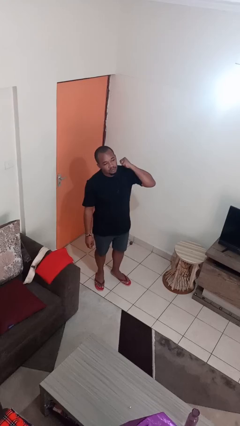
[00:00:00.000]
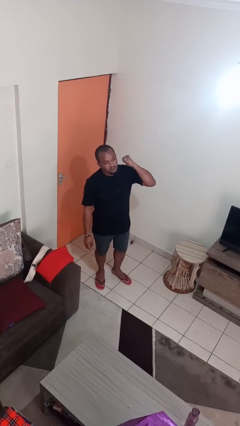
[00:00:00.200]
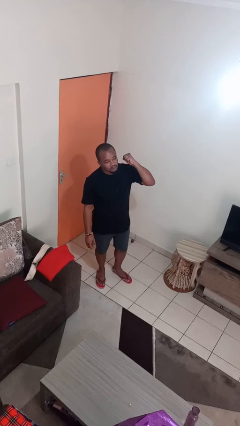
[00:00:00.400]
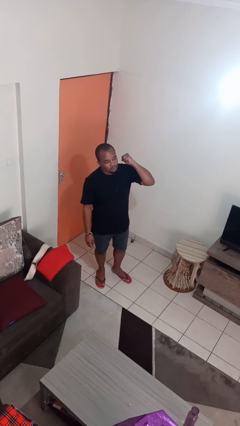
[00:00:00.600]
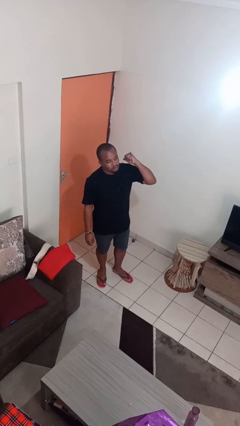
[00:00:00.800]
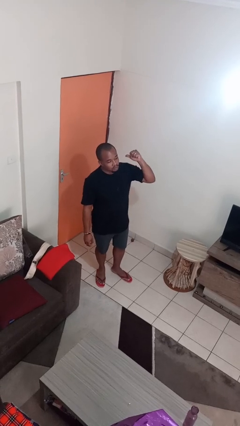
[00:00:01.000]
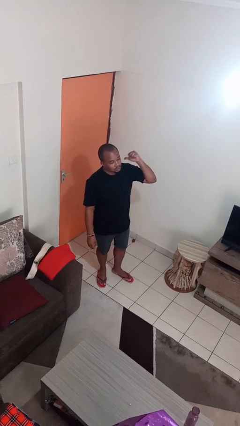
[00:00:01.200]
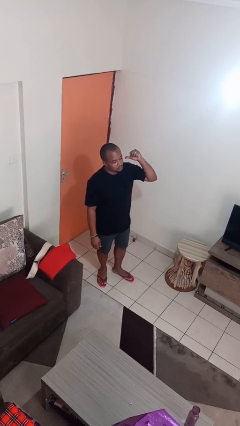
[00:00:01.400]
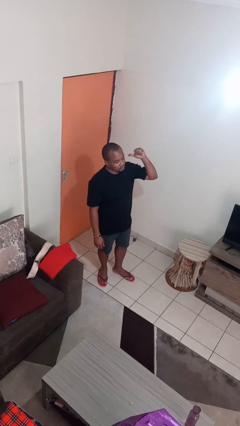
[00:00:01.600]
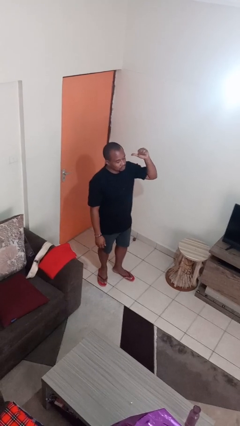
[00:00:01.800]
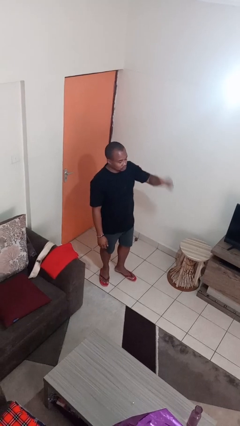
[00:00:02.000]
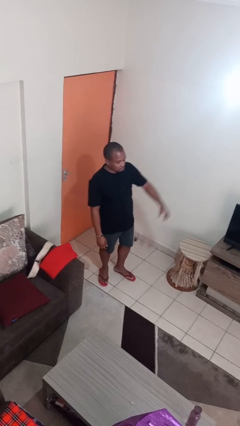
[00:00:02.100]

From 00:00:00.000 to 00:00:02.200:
person gestures behind me

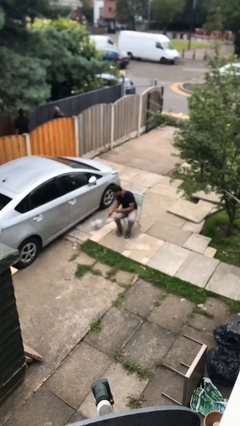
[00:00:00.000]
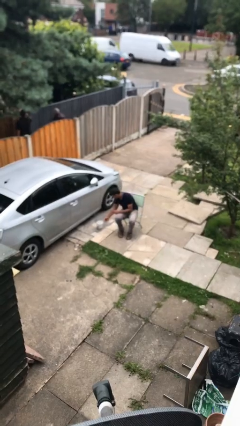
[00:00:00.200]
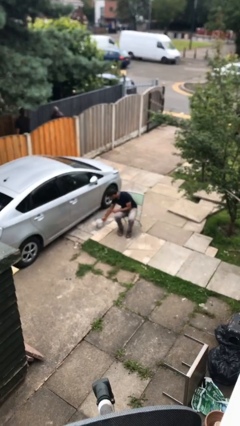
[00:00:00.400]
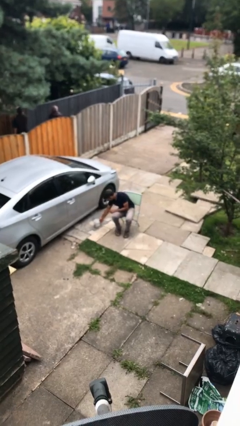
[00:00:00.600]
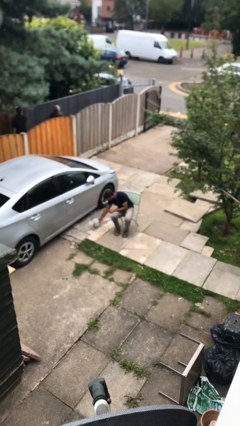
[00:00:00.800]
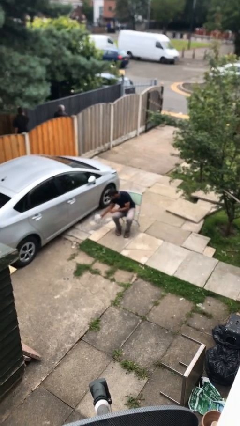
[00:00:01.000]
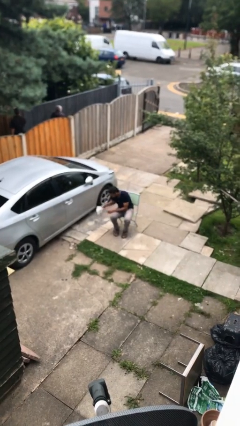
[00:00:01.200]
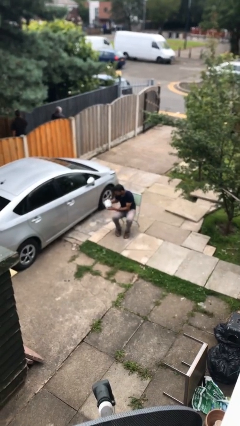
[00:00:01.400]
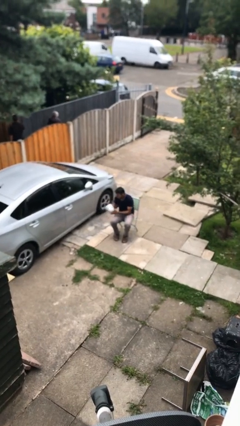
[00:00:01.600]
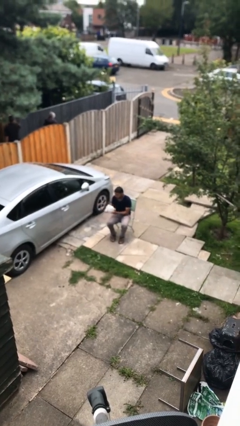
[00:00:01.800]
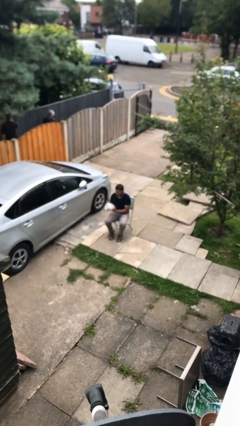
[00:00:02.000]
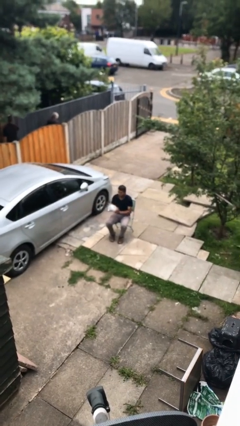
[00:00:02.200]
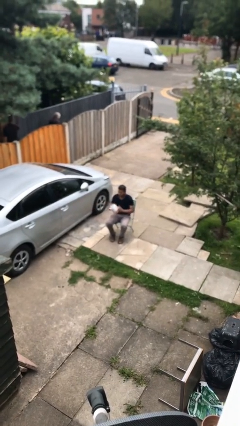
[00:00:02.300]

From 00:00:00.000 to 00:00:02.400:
person picks up object from floor

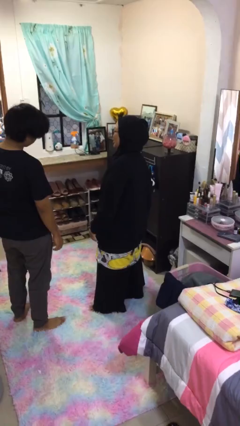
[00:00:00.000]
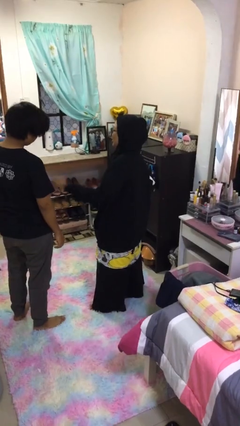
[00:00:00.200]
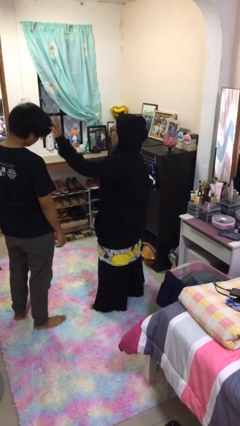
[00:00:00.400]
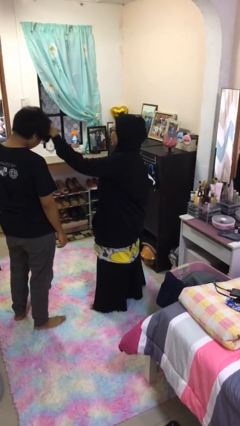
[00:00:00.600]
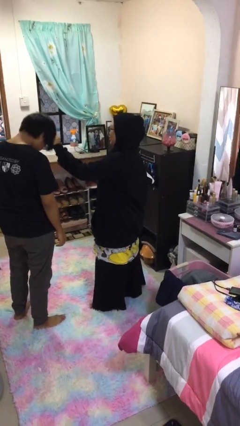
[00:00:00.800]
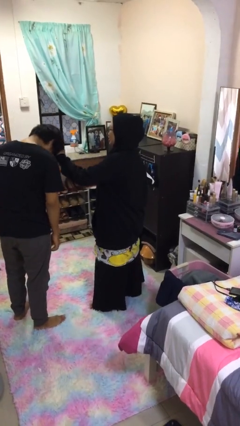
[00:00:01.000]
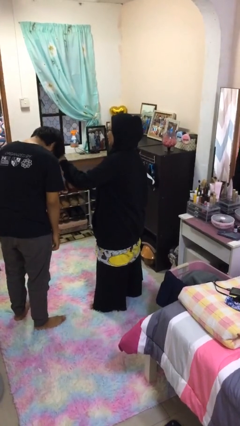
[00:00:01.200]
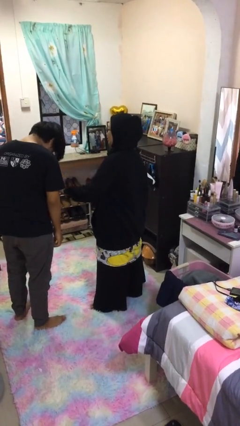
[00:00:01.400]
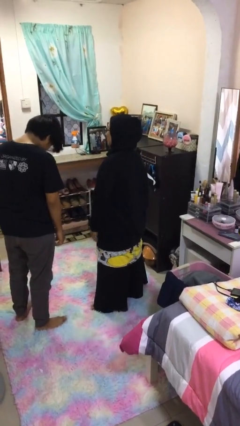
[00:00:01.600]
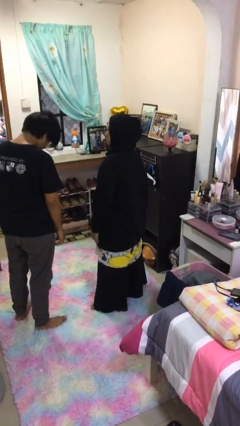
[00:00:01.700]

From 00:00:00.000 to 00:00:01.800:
person grabs person by hair

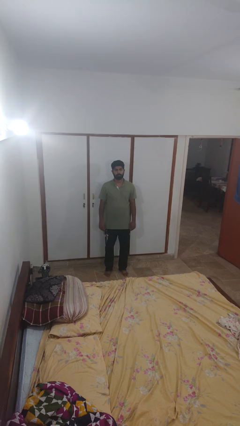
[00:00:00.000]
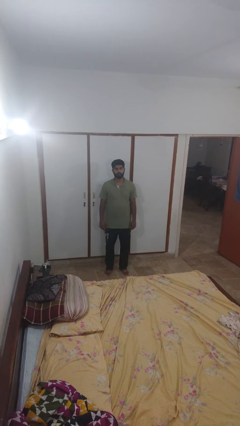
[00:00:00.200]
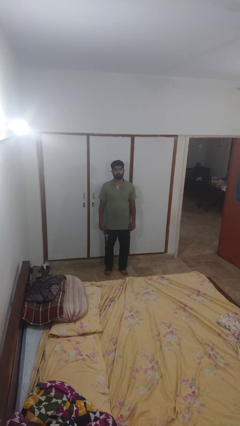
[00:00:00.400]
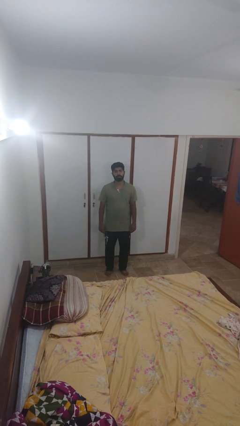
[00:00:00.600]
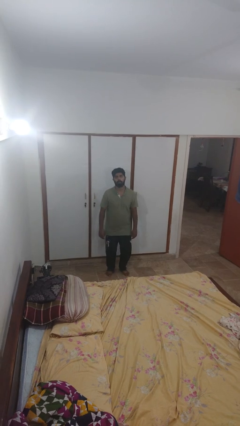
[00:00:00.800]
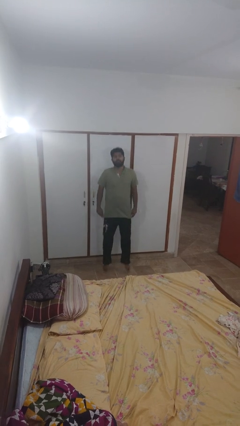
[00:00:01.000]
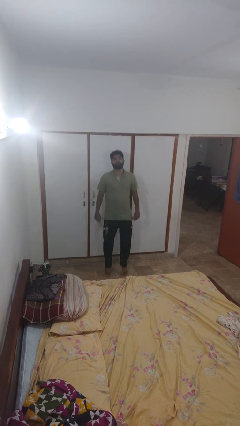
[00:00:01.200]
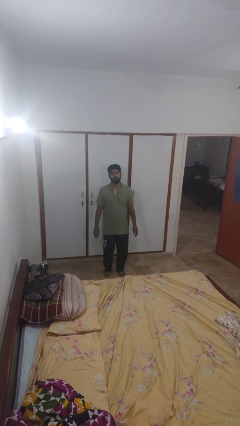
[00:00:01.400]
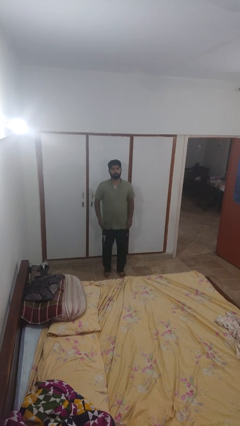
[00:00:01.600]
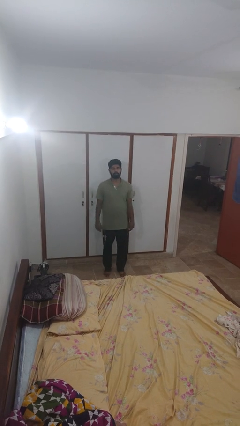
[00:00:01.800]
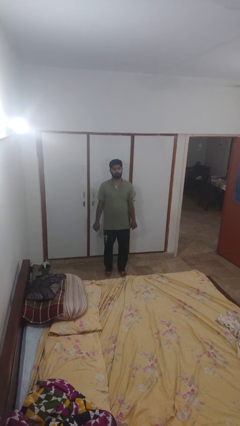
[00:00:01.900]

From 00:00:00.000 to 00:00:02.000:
person jumps

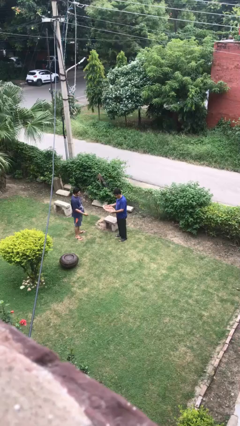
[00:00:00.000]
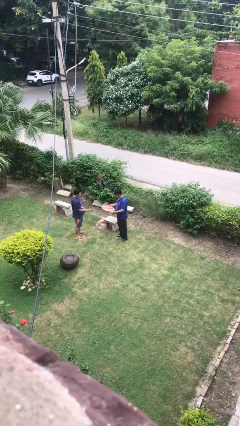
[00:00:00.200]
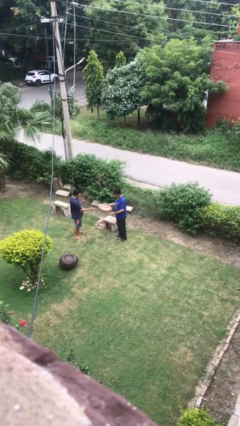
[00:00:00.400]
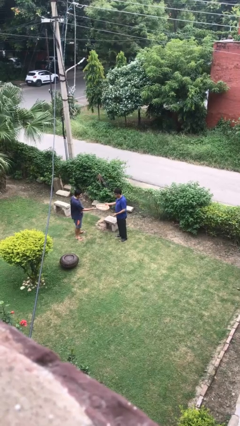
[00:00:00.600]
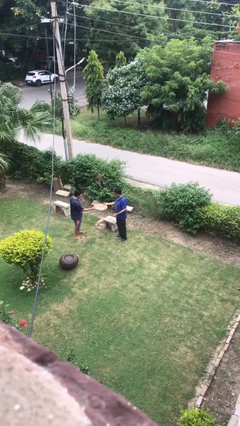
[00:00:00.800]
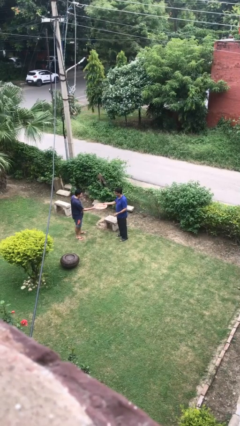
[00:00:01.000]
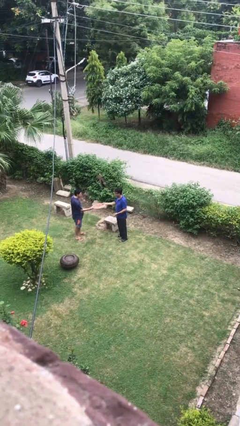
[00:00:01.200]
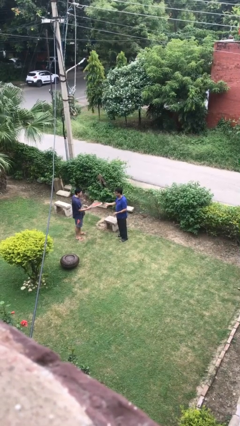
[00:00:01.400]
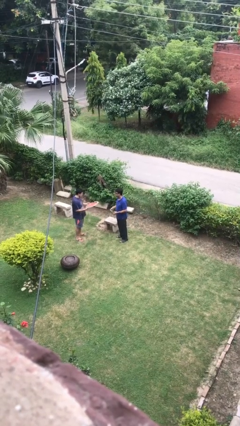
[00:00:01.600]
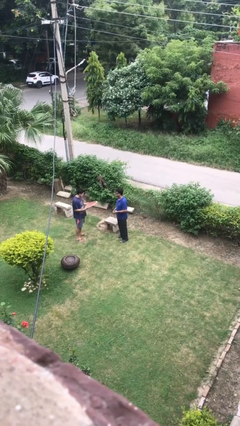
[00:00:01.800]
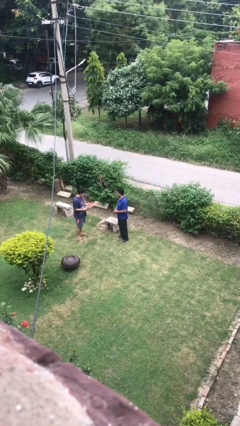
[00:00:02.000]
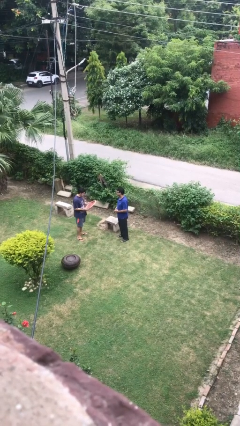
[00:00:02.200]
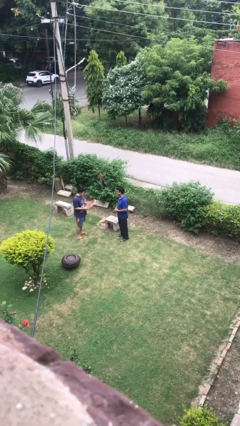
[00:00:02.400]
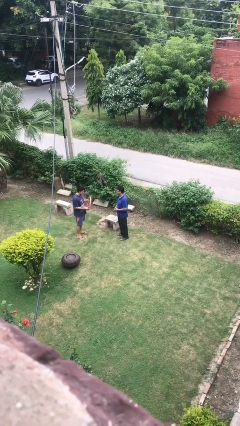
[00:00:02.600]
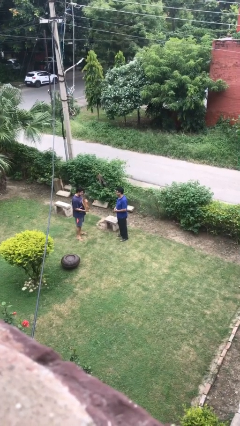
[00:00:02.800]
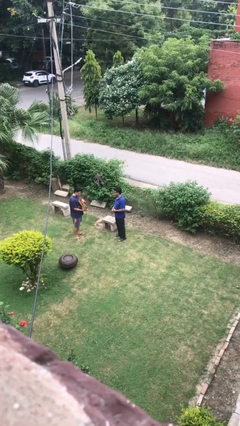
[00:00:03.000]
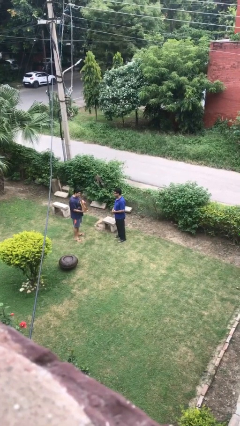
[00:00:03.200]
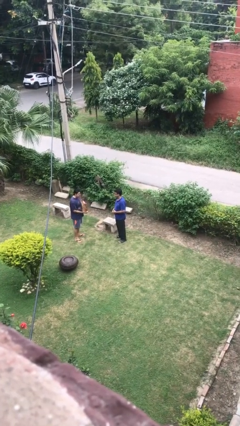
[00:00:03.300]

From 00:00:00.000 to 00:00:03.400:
person transfers object to person

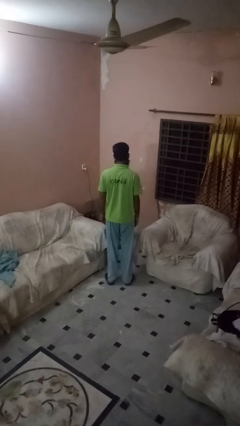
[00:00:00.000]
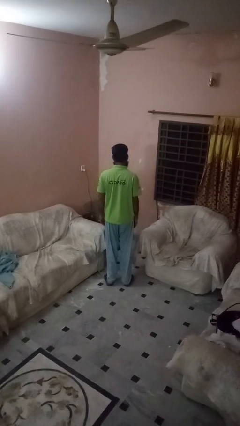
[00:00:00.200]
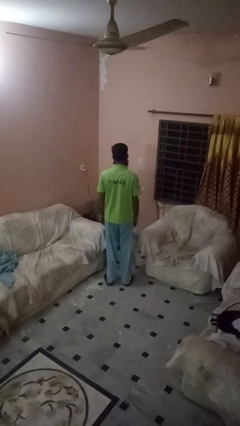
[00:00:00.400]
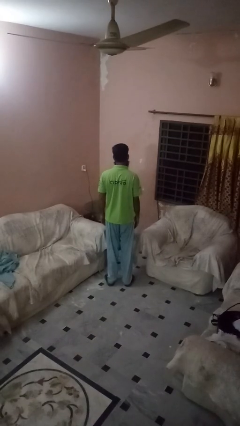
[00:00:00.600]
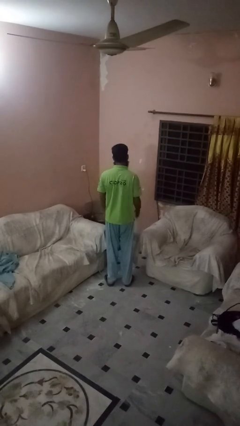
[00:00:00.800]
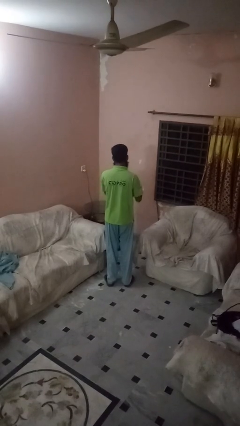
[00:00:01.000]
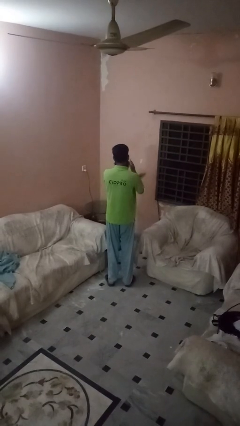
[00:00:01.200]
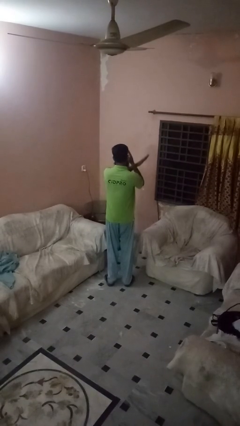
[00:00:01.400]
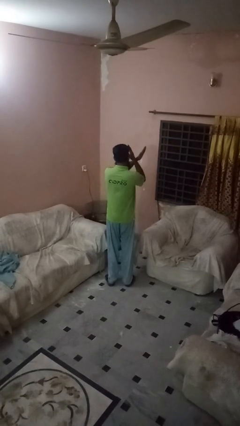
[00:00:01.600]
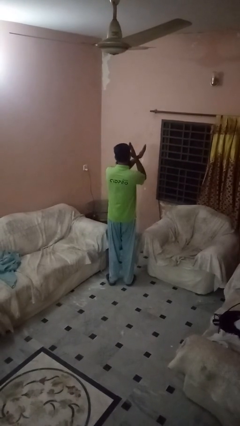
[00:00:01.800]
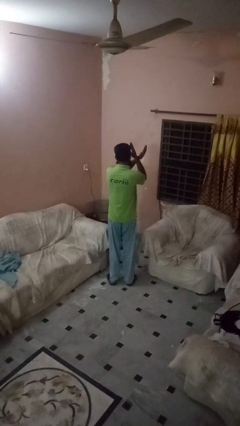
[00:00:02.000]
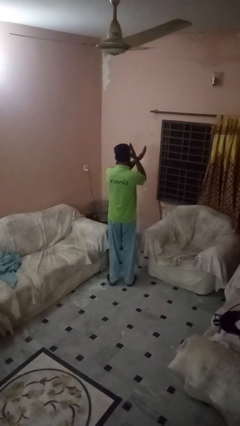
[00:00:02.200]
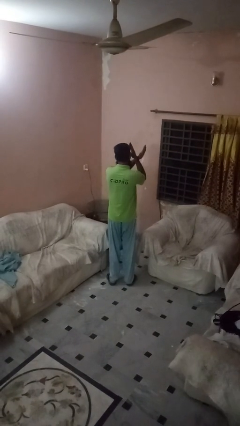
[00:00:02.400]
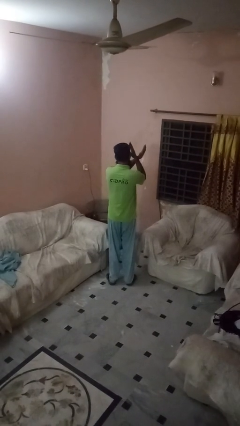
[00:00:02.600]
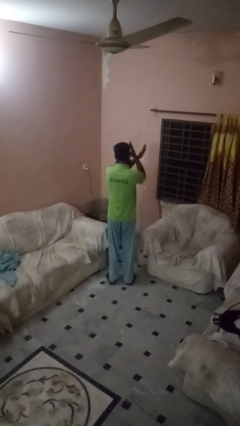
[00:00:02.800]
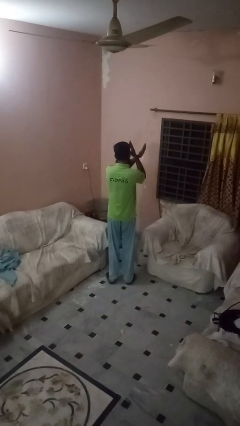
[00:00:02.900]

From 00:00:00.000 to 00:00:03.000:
person gestures arms x

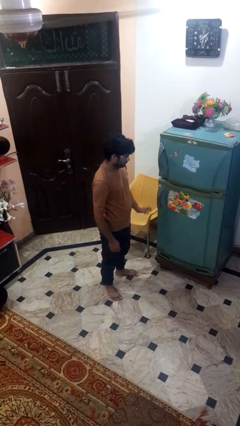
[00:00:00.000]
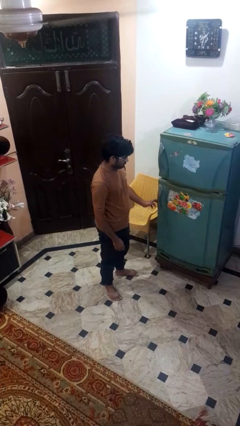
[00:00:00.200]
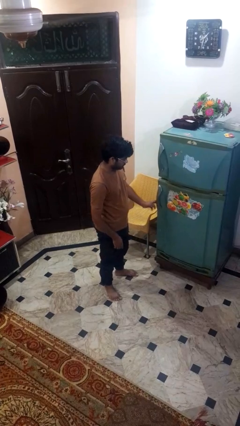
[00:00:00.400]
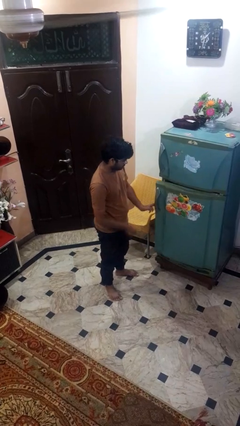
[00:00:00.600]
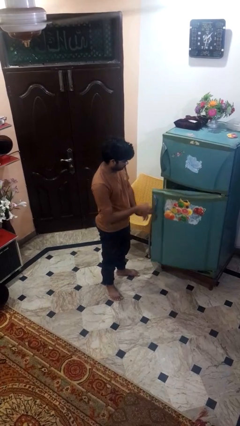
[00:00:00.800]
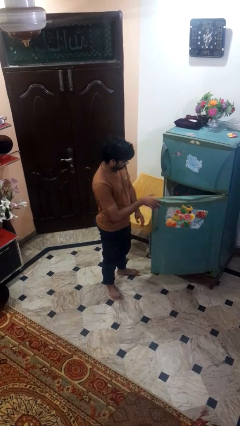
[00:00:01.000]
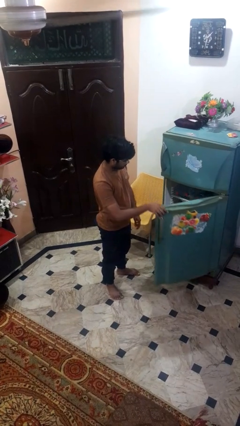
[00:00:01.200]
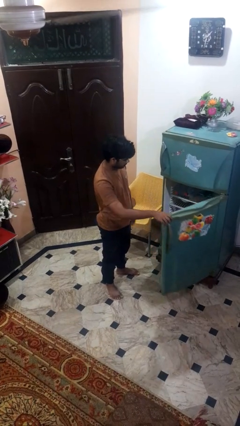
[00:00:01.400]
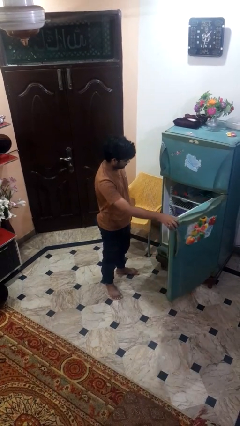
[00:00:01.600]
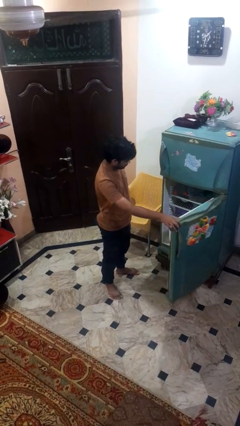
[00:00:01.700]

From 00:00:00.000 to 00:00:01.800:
person opens refrigerator

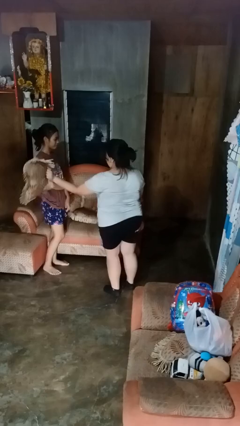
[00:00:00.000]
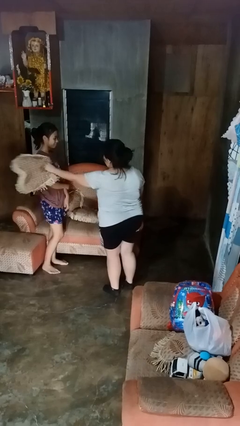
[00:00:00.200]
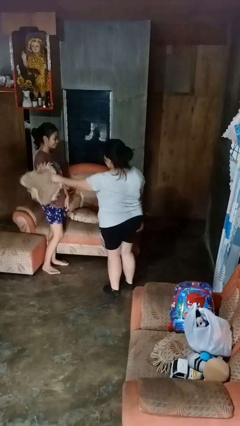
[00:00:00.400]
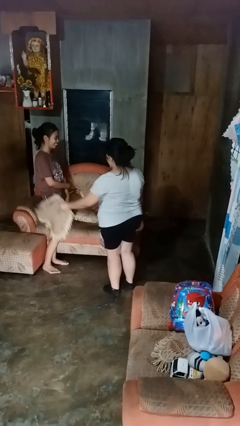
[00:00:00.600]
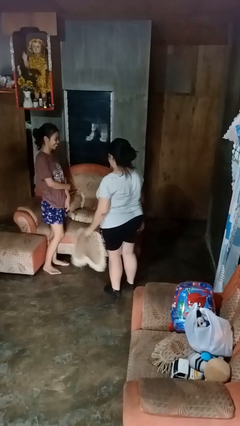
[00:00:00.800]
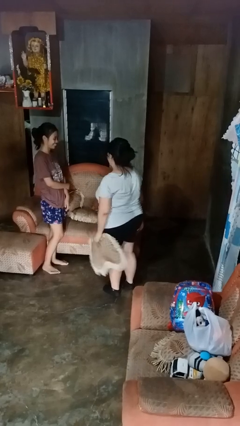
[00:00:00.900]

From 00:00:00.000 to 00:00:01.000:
person hits person with pillow
